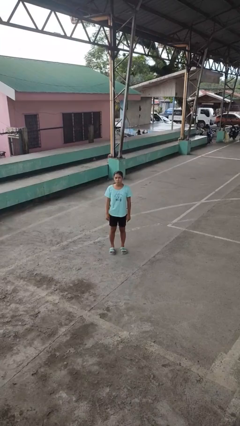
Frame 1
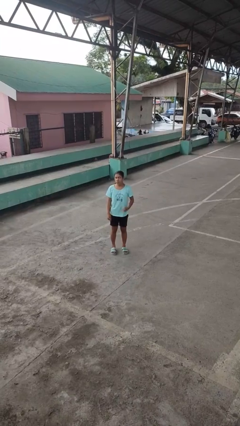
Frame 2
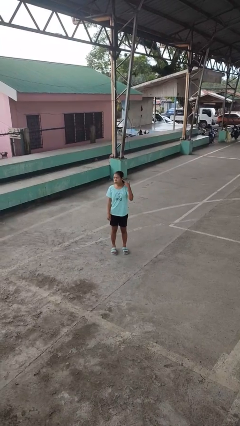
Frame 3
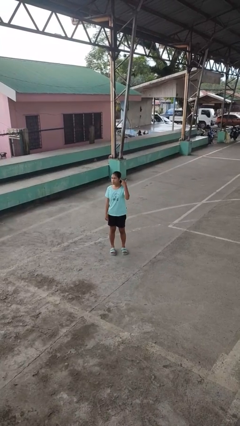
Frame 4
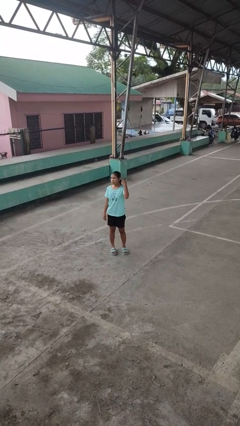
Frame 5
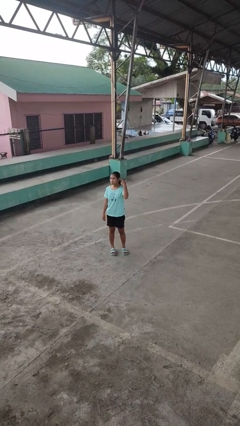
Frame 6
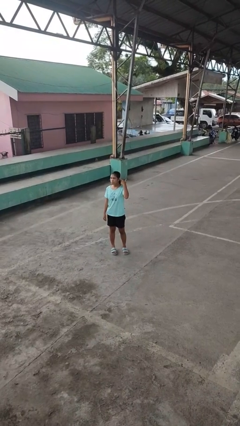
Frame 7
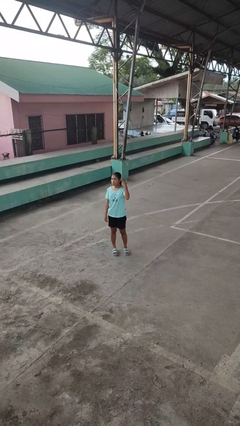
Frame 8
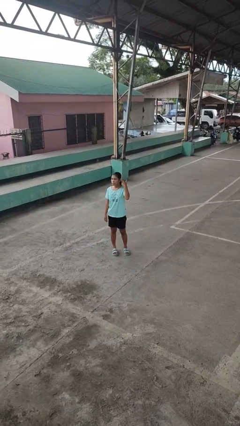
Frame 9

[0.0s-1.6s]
person gestures listen closely

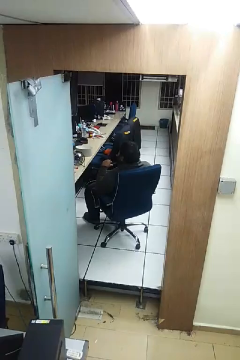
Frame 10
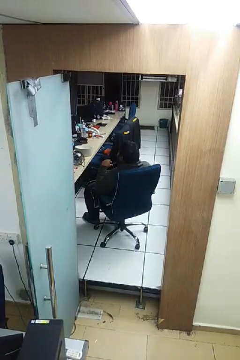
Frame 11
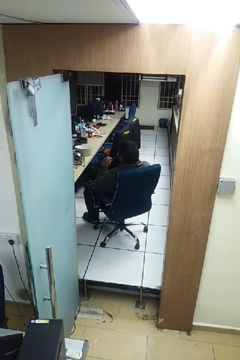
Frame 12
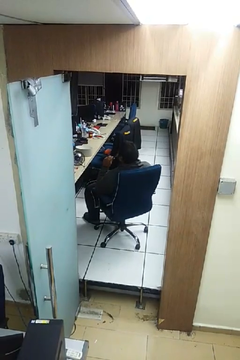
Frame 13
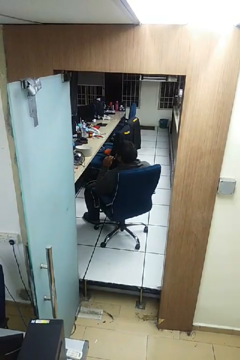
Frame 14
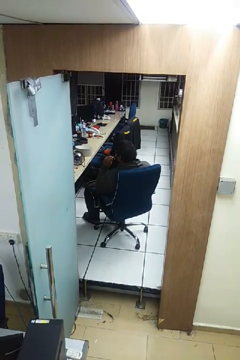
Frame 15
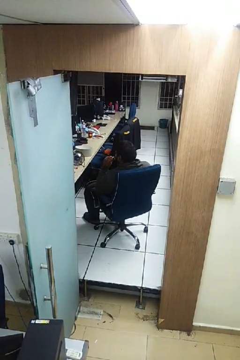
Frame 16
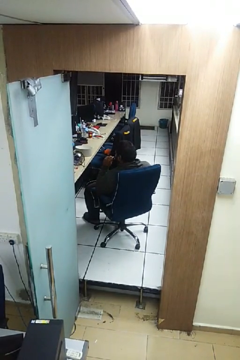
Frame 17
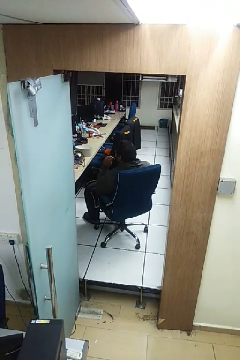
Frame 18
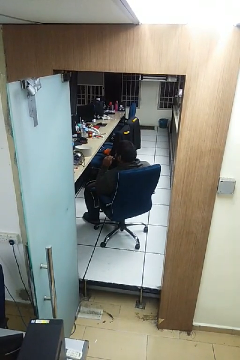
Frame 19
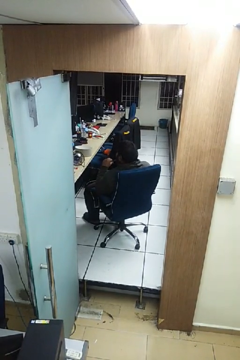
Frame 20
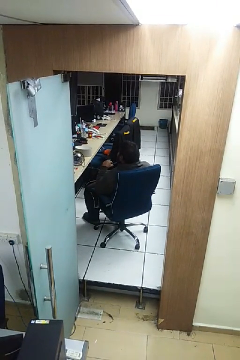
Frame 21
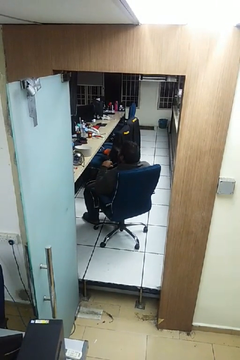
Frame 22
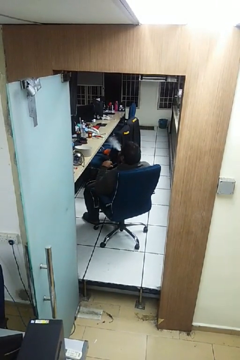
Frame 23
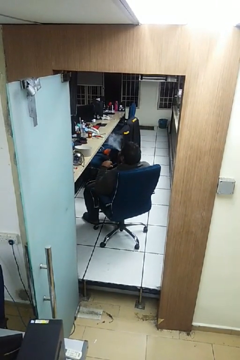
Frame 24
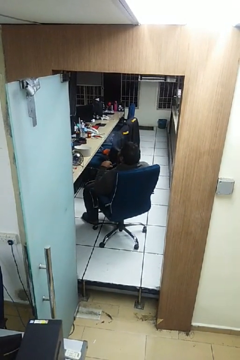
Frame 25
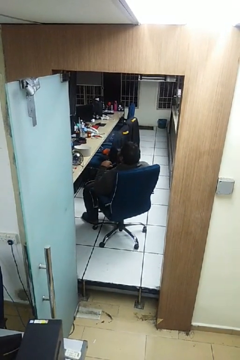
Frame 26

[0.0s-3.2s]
person vapes

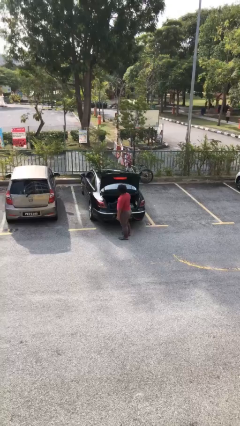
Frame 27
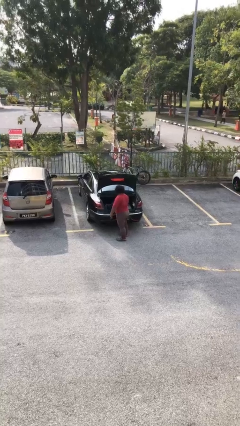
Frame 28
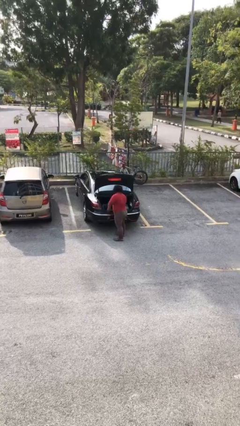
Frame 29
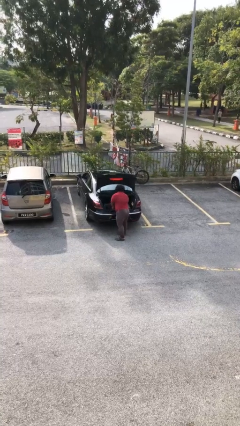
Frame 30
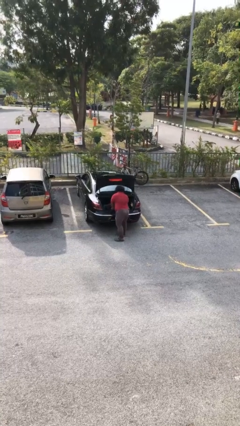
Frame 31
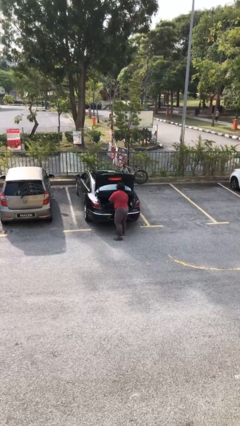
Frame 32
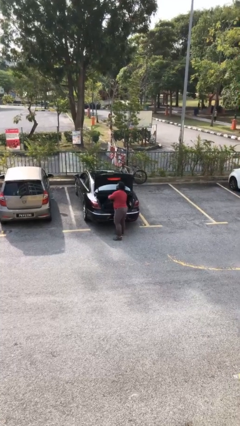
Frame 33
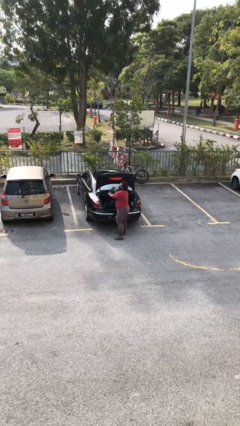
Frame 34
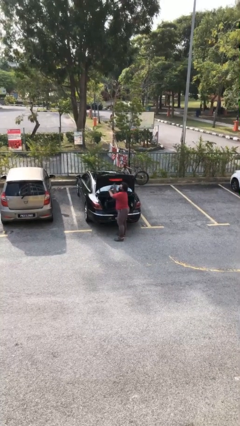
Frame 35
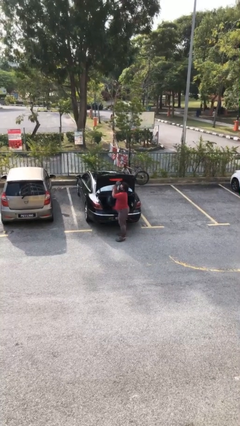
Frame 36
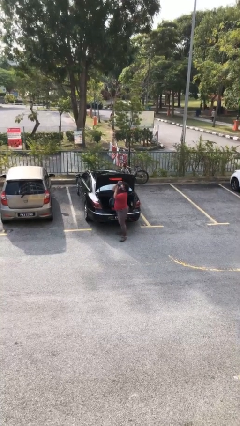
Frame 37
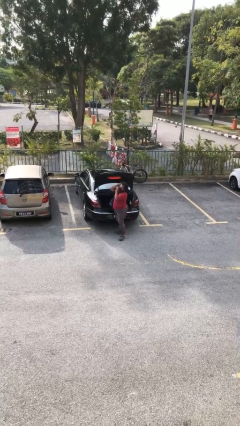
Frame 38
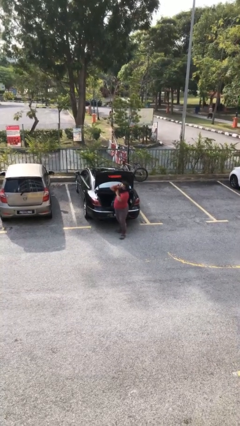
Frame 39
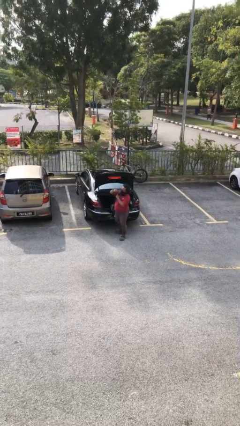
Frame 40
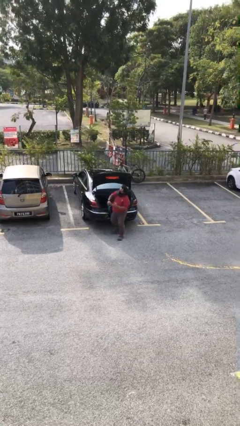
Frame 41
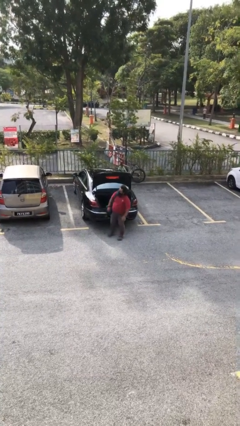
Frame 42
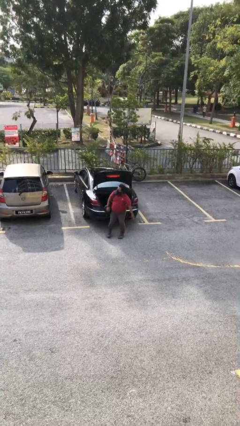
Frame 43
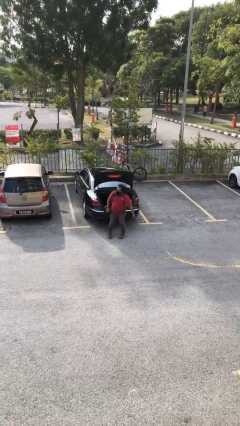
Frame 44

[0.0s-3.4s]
person unloads car

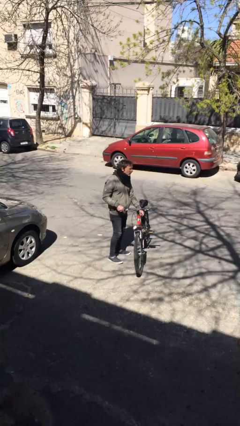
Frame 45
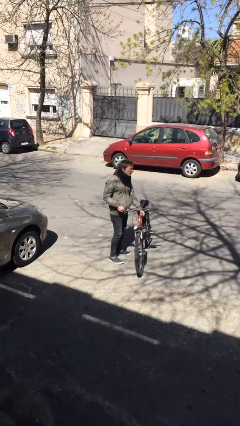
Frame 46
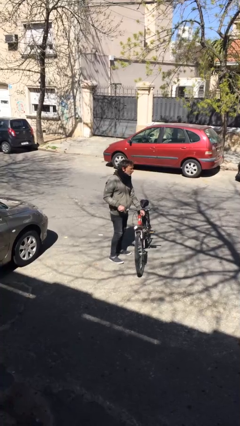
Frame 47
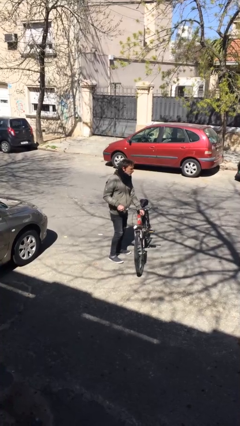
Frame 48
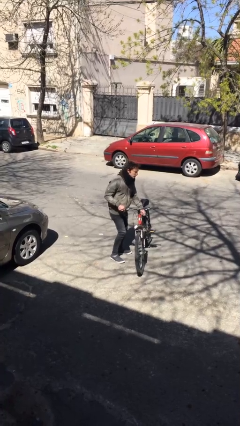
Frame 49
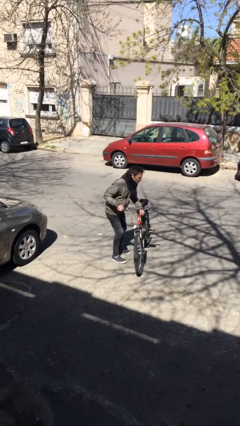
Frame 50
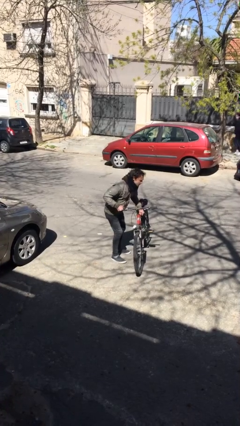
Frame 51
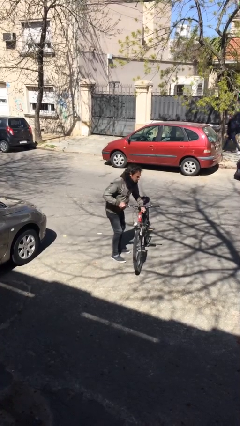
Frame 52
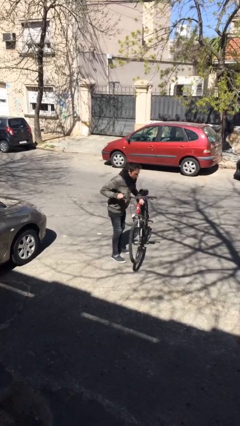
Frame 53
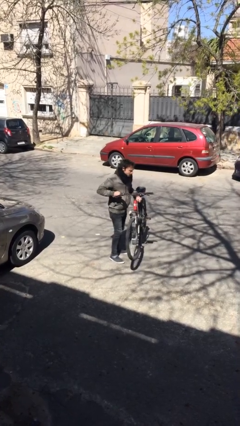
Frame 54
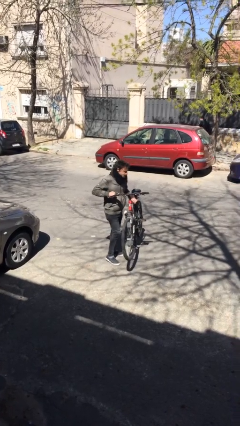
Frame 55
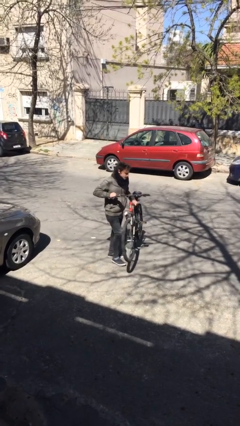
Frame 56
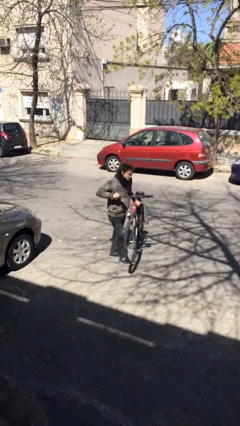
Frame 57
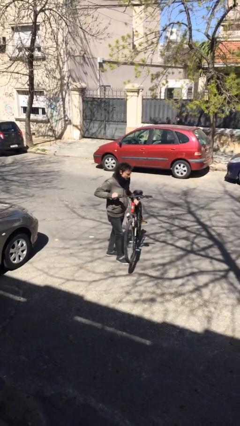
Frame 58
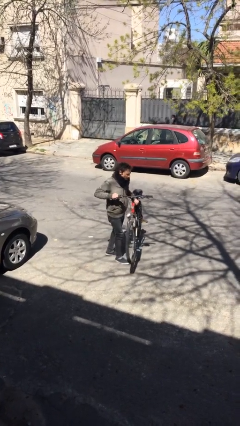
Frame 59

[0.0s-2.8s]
person picks up object from floor

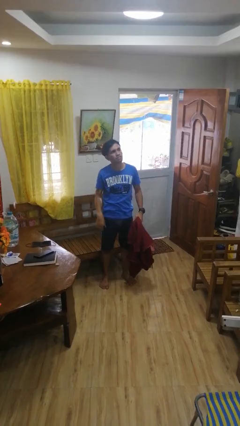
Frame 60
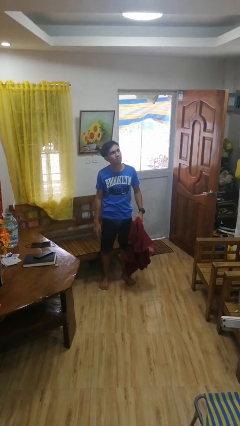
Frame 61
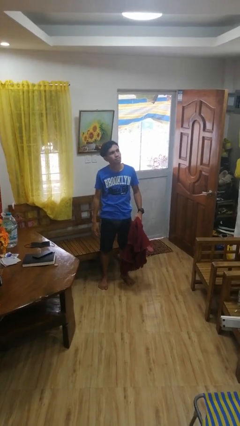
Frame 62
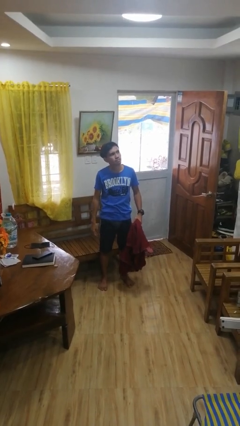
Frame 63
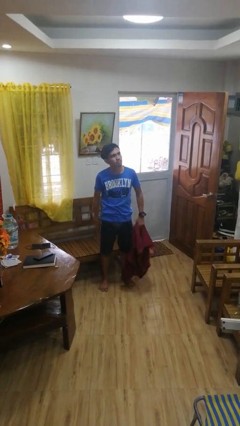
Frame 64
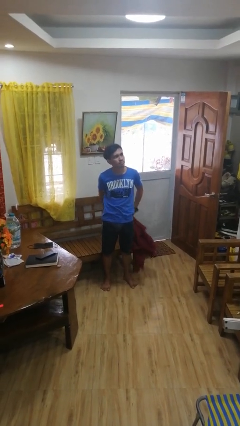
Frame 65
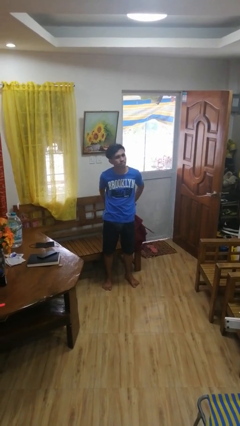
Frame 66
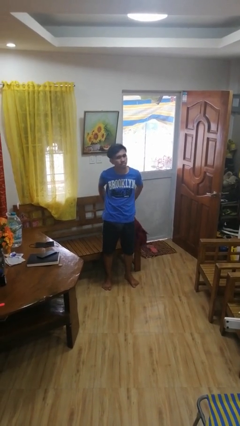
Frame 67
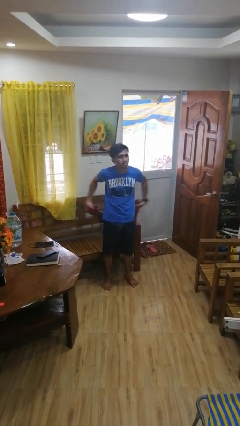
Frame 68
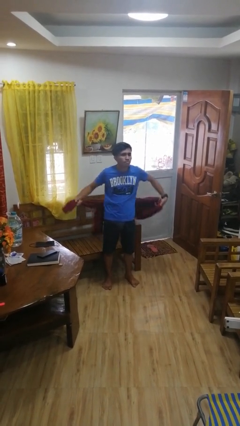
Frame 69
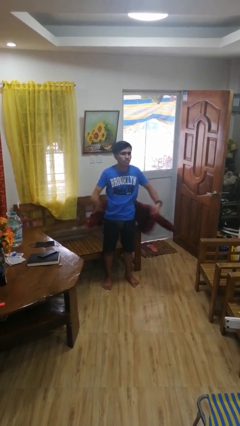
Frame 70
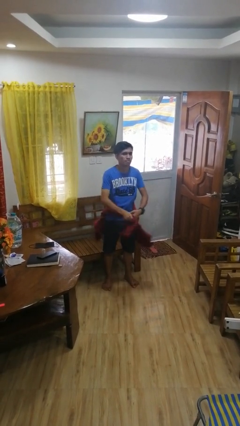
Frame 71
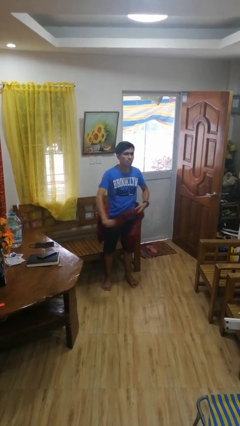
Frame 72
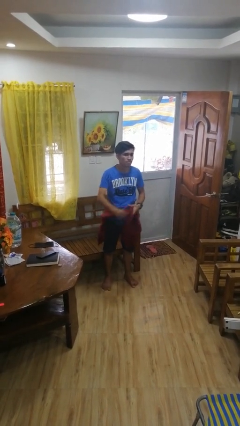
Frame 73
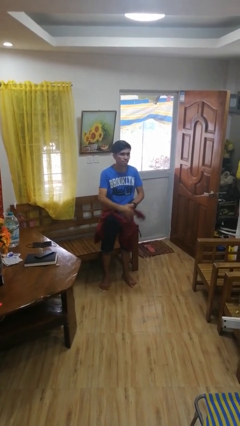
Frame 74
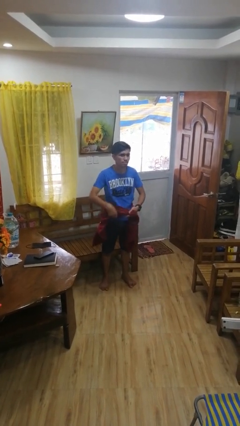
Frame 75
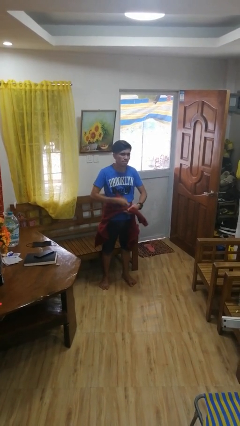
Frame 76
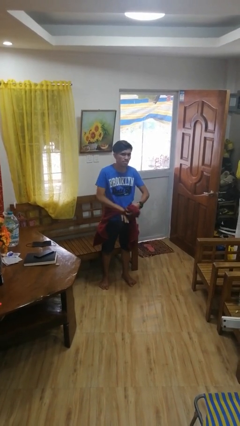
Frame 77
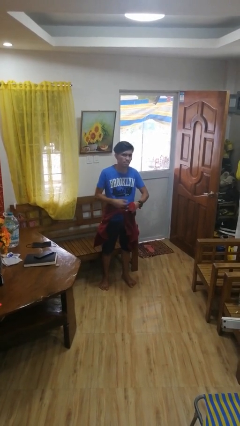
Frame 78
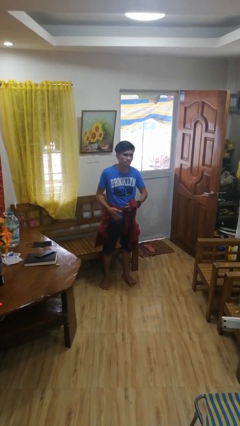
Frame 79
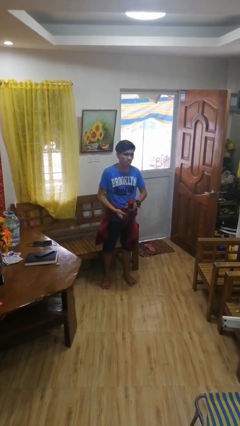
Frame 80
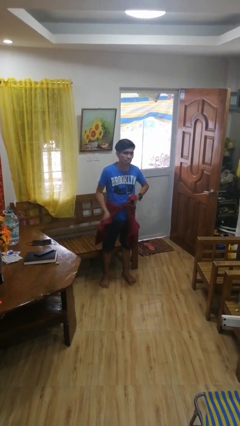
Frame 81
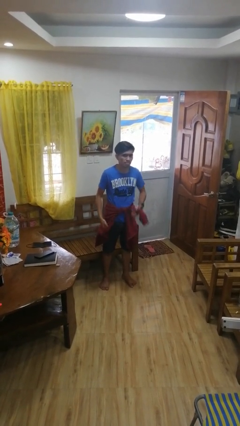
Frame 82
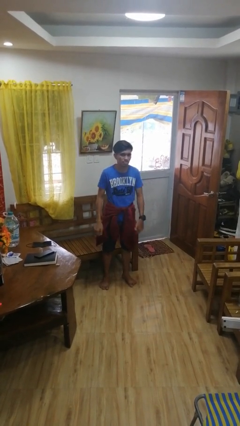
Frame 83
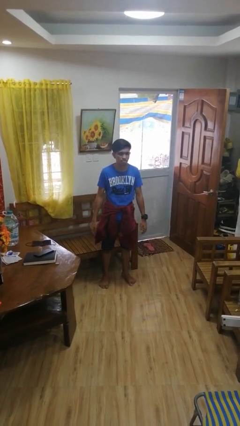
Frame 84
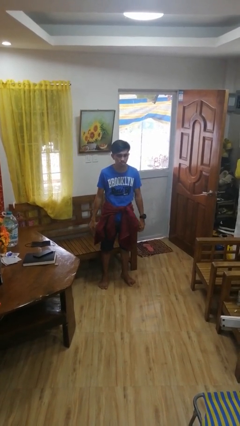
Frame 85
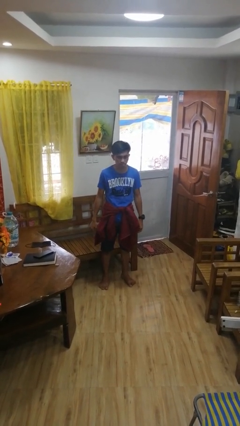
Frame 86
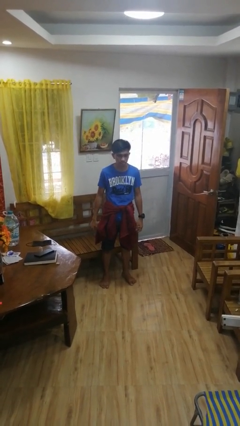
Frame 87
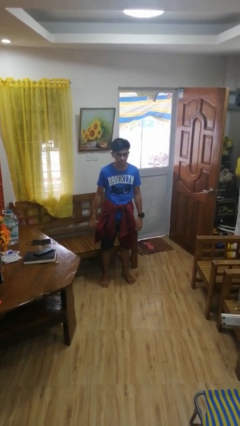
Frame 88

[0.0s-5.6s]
person ties jacket around waist

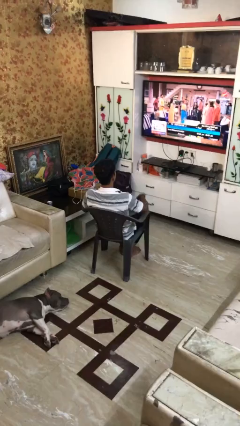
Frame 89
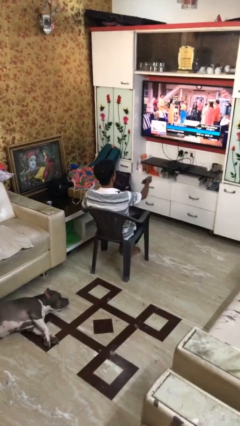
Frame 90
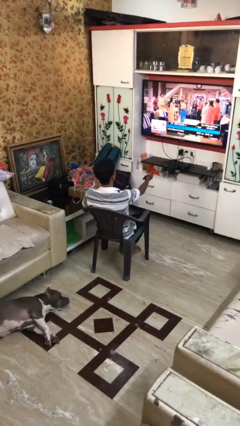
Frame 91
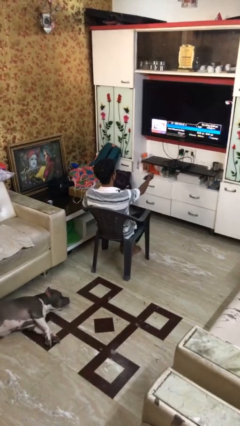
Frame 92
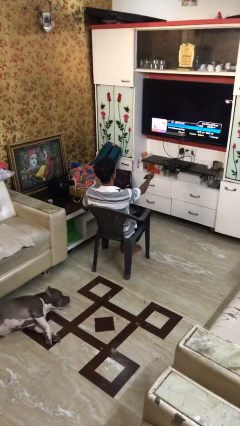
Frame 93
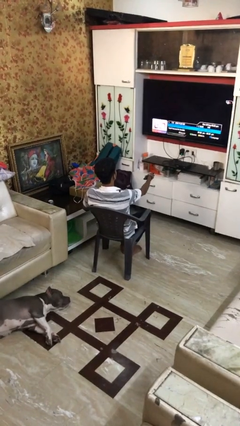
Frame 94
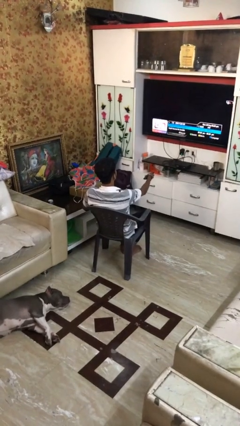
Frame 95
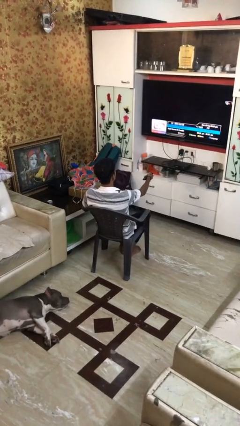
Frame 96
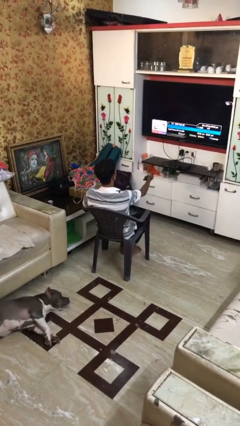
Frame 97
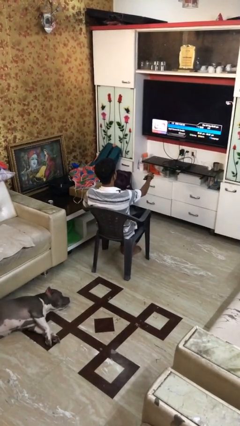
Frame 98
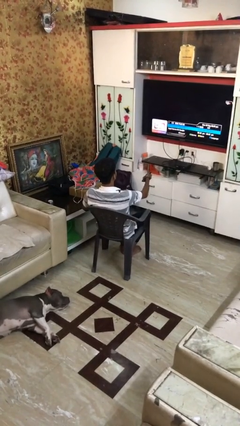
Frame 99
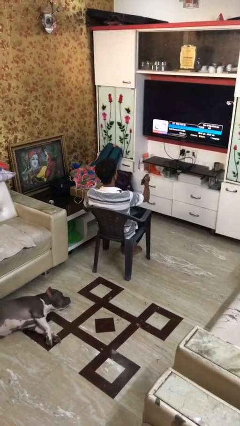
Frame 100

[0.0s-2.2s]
person uses television remote
